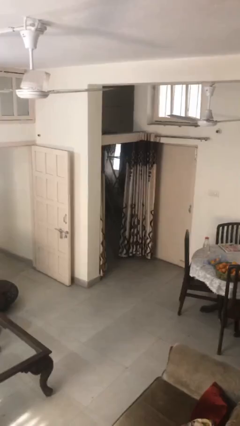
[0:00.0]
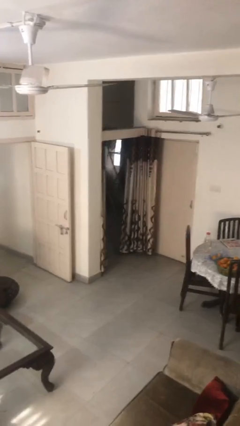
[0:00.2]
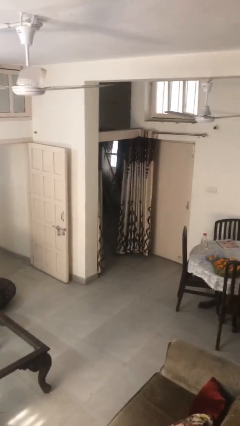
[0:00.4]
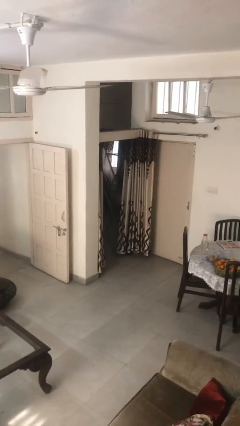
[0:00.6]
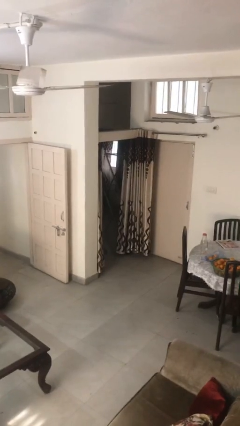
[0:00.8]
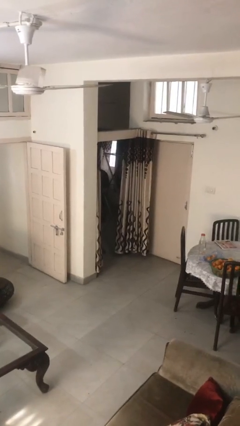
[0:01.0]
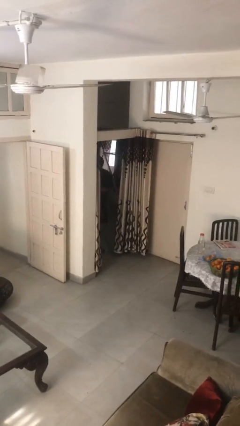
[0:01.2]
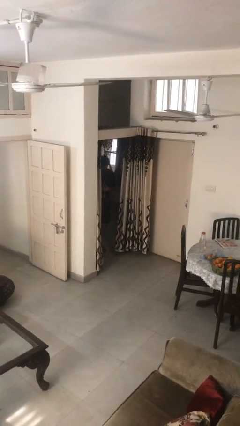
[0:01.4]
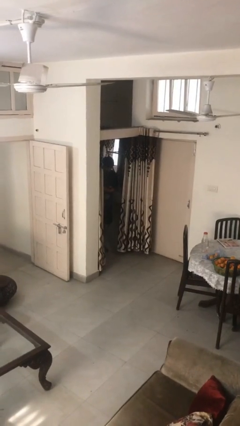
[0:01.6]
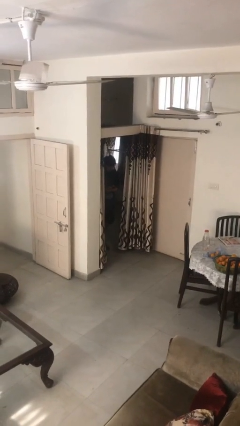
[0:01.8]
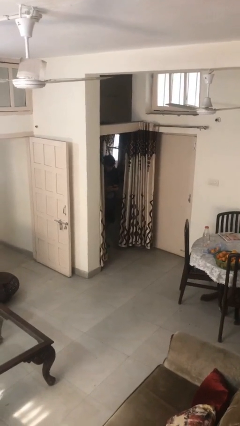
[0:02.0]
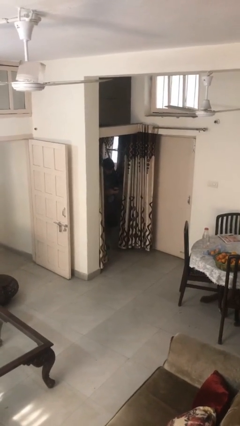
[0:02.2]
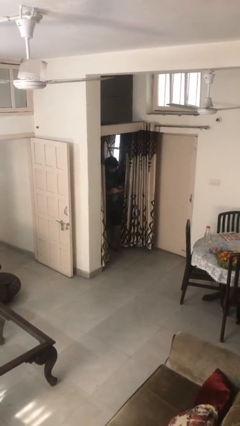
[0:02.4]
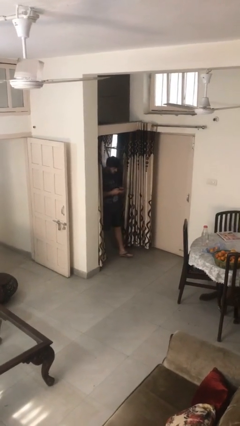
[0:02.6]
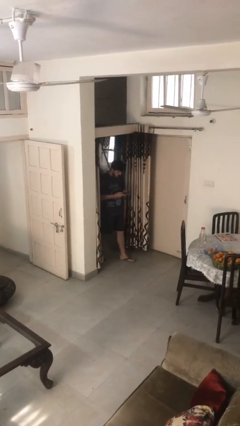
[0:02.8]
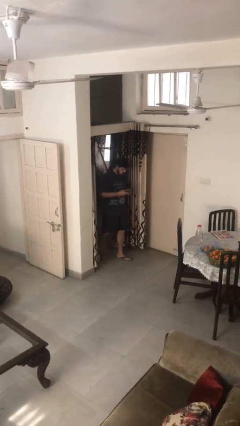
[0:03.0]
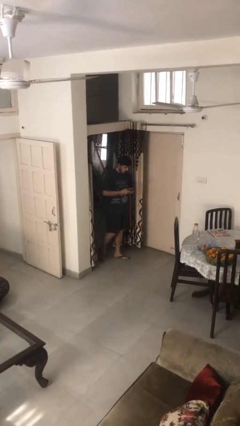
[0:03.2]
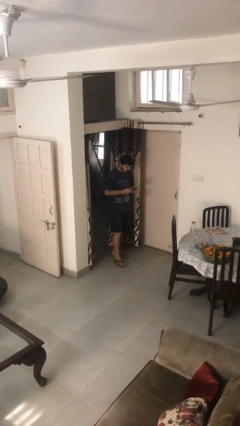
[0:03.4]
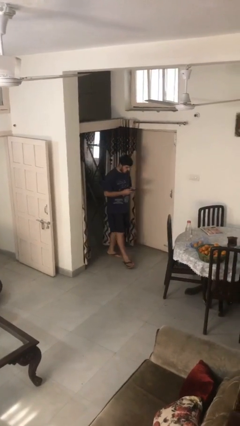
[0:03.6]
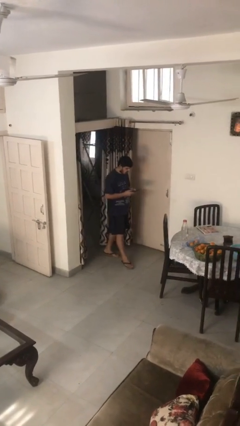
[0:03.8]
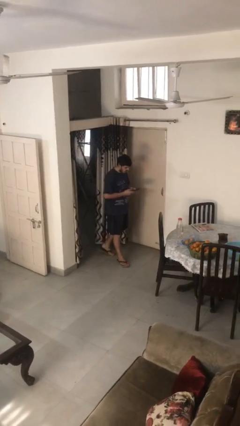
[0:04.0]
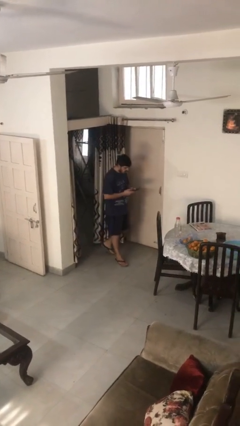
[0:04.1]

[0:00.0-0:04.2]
person enters scene through structure

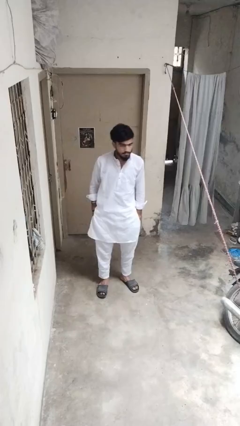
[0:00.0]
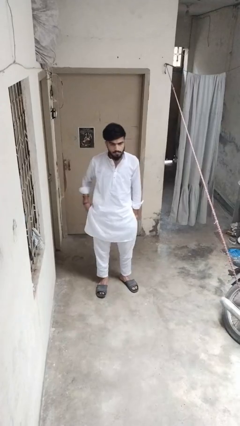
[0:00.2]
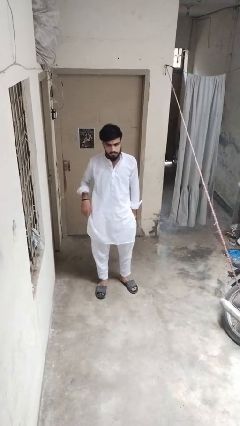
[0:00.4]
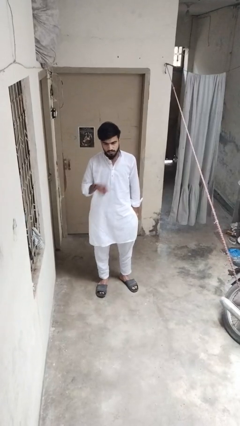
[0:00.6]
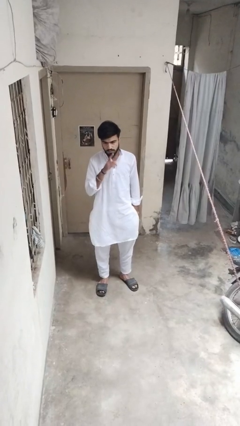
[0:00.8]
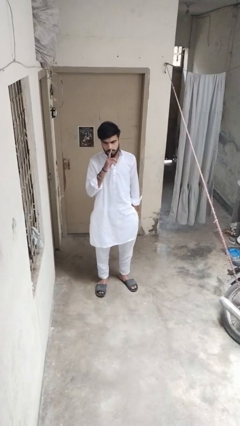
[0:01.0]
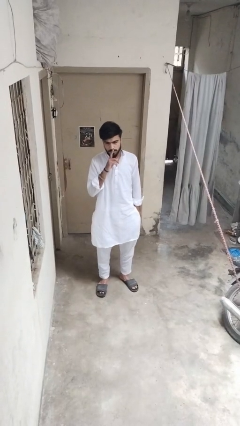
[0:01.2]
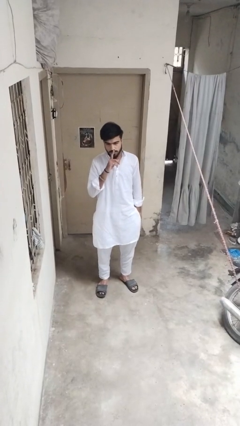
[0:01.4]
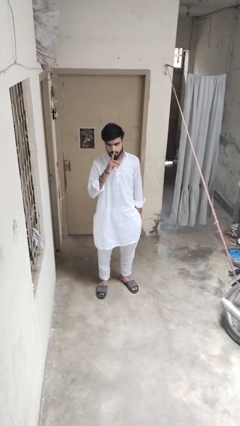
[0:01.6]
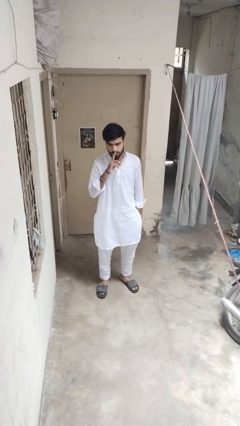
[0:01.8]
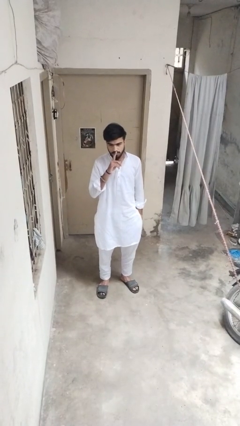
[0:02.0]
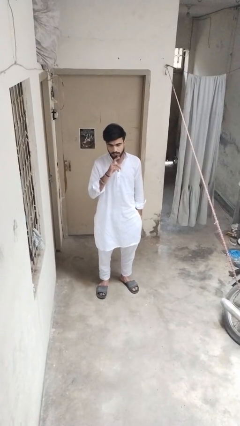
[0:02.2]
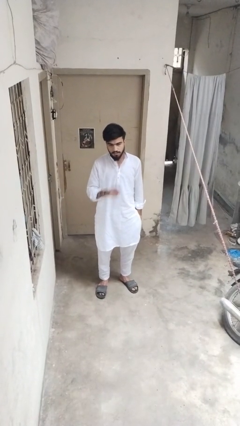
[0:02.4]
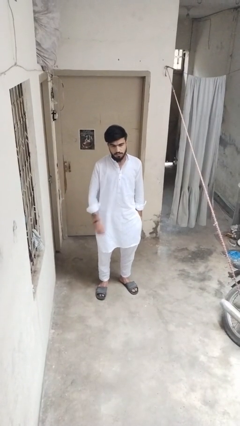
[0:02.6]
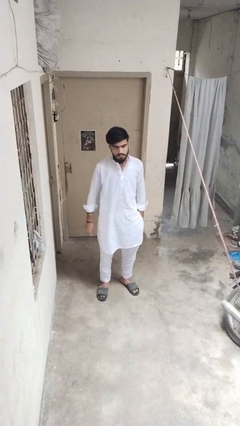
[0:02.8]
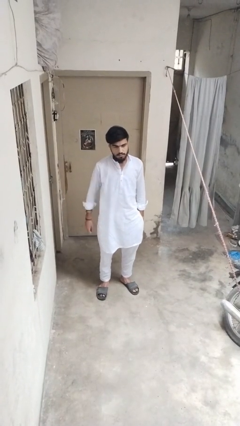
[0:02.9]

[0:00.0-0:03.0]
person gestures be quiet

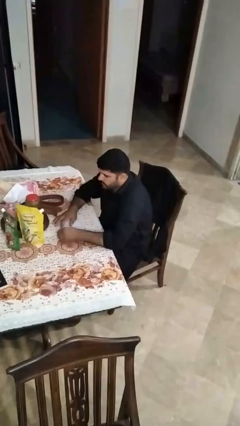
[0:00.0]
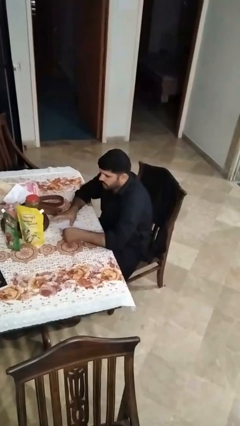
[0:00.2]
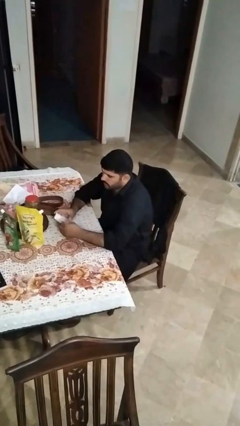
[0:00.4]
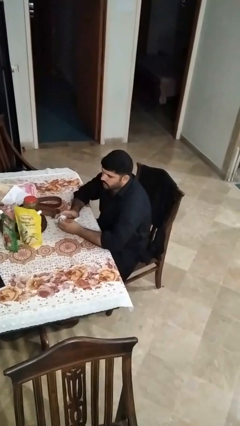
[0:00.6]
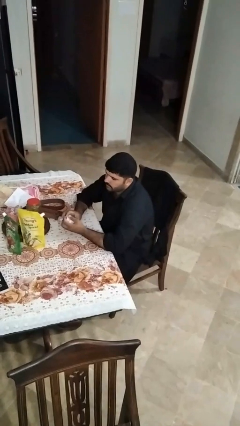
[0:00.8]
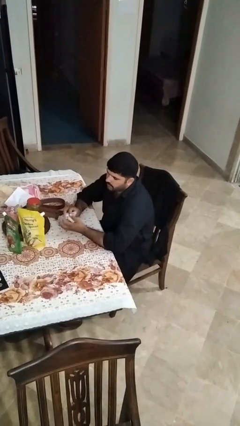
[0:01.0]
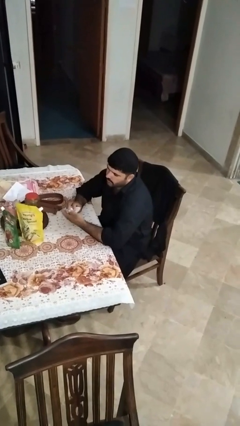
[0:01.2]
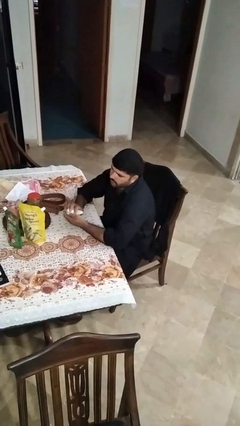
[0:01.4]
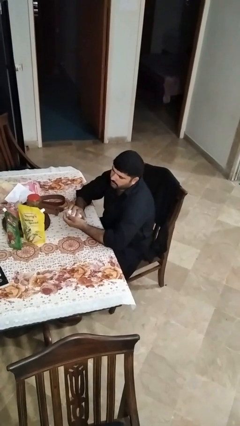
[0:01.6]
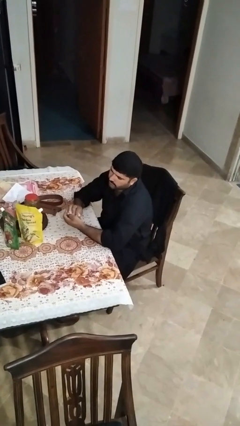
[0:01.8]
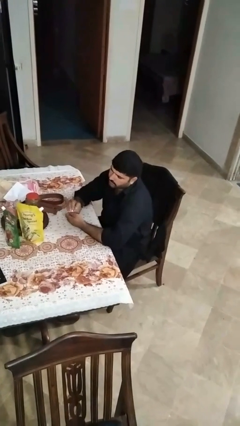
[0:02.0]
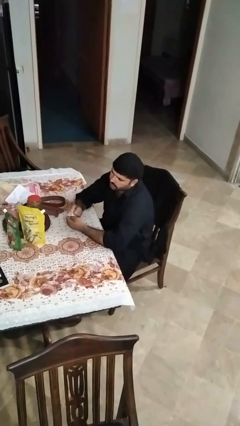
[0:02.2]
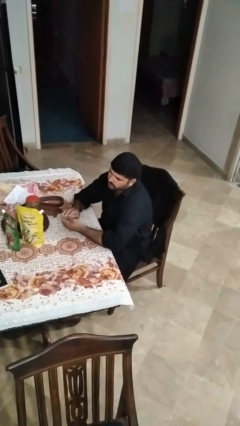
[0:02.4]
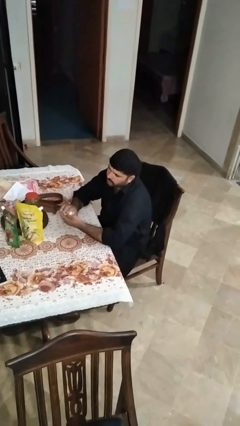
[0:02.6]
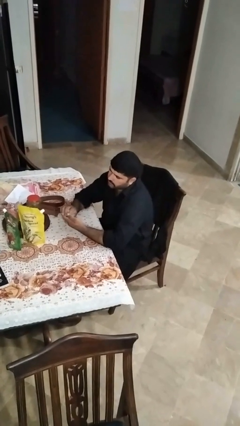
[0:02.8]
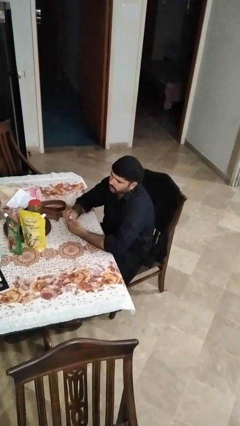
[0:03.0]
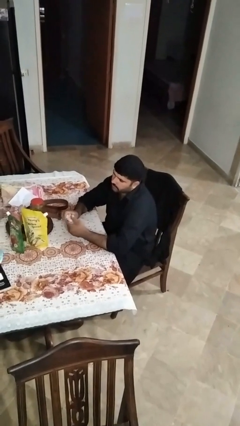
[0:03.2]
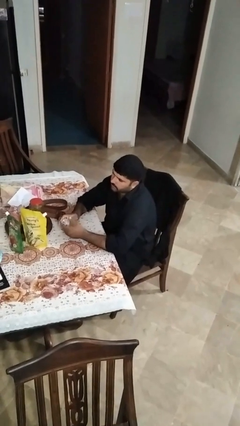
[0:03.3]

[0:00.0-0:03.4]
person crumples paper

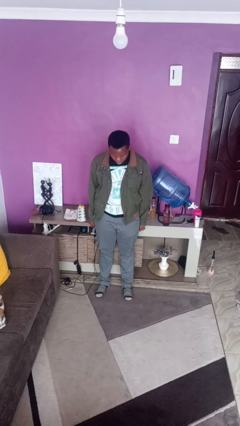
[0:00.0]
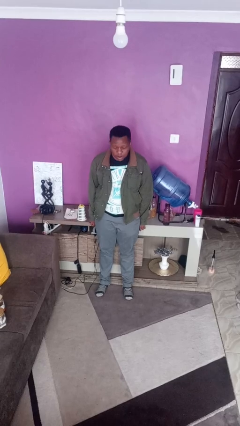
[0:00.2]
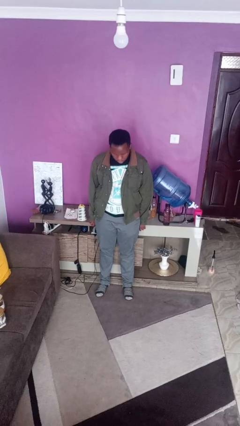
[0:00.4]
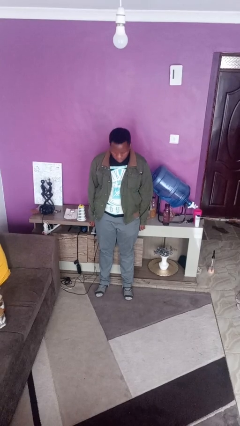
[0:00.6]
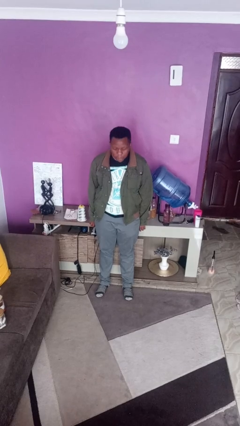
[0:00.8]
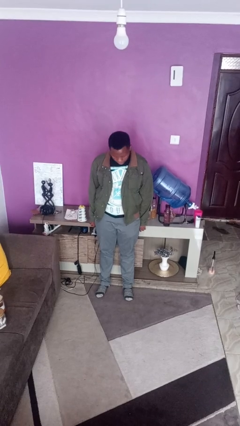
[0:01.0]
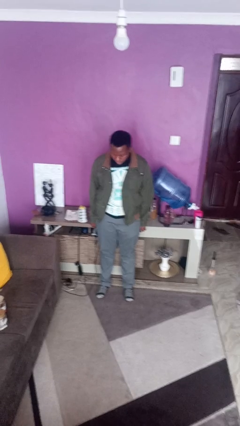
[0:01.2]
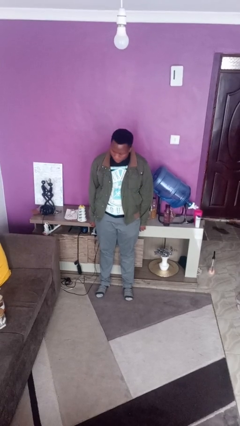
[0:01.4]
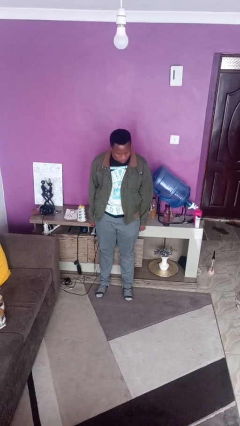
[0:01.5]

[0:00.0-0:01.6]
person nods head

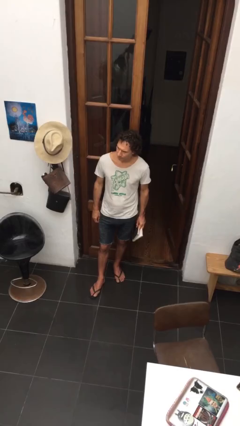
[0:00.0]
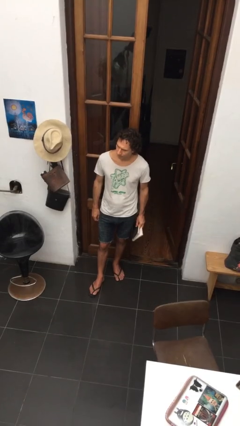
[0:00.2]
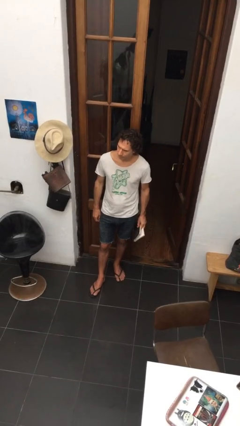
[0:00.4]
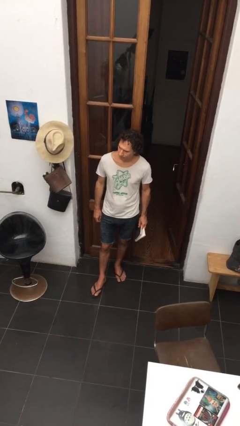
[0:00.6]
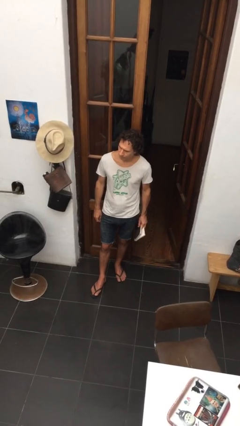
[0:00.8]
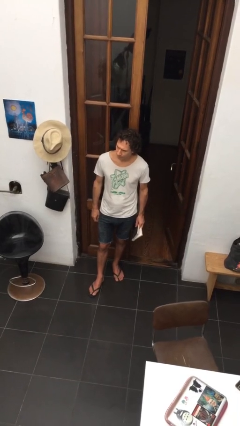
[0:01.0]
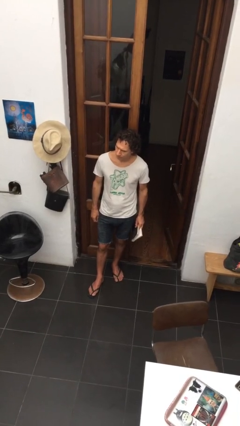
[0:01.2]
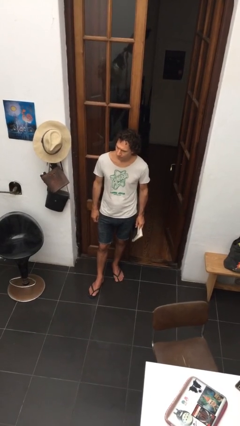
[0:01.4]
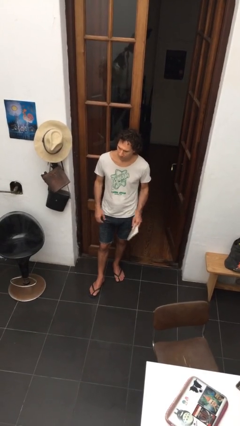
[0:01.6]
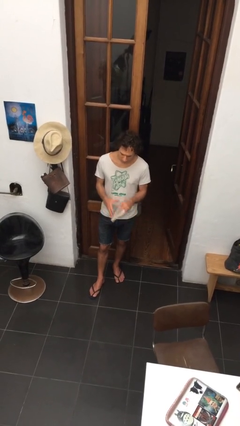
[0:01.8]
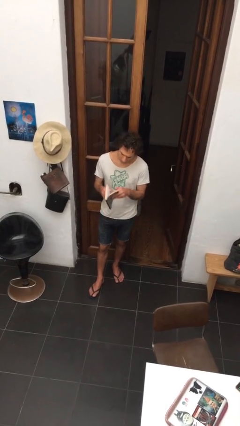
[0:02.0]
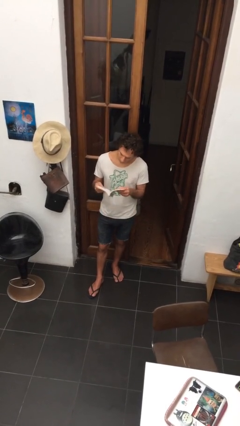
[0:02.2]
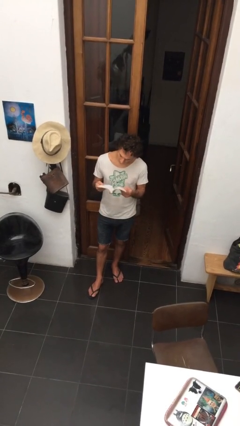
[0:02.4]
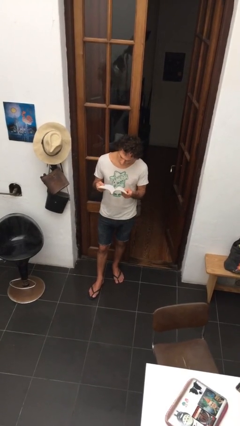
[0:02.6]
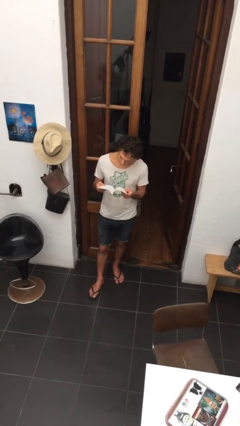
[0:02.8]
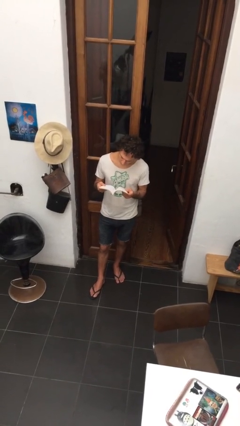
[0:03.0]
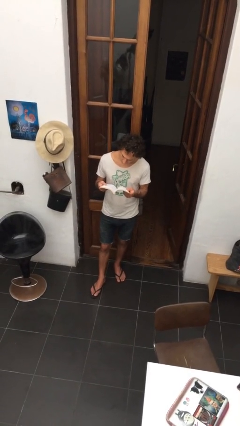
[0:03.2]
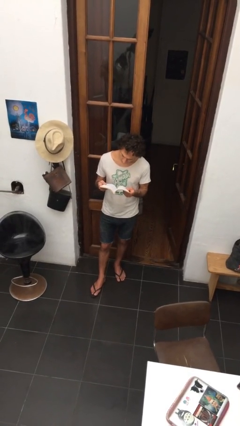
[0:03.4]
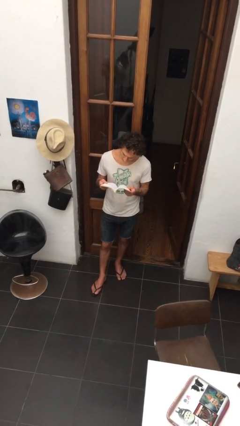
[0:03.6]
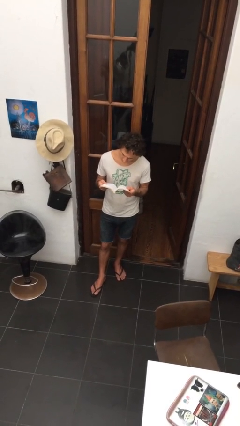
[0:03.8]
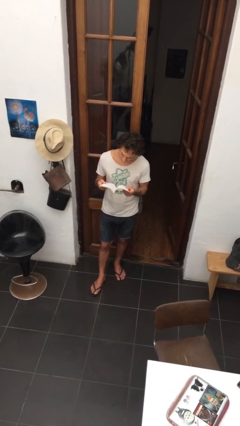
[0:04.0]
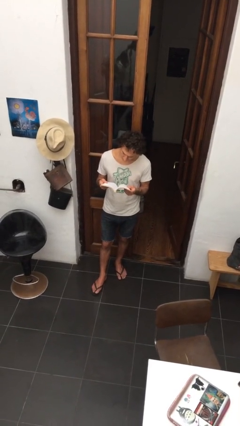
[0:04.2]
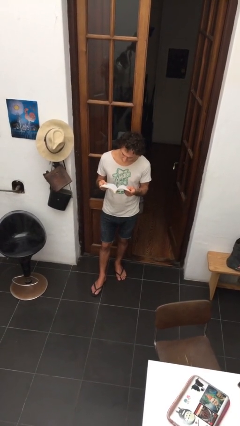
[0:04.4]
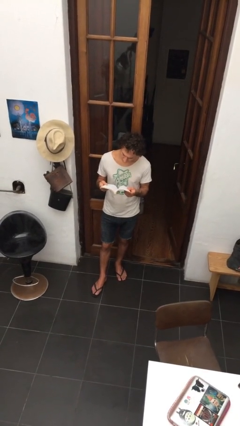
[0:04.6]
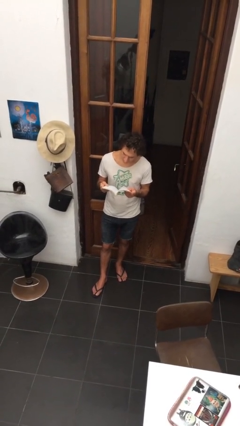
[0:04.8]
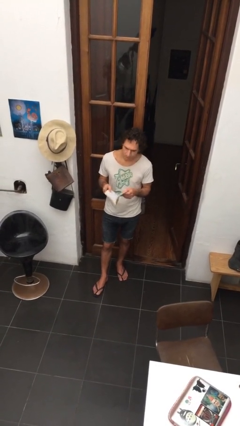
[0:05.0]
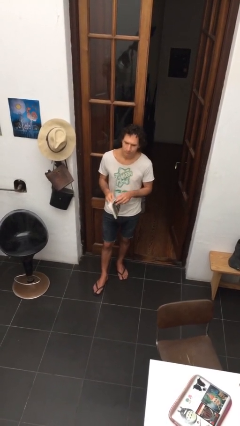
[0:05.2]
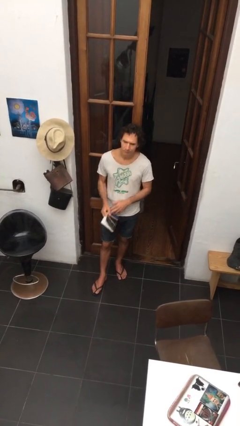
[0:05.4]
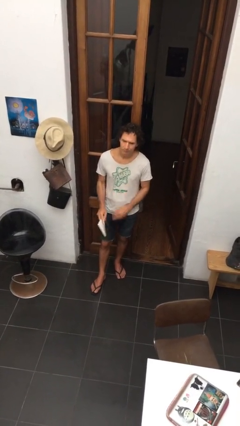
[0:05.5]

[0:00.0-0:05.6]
person reads document
